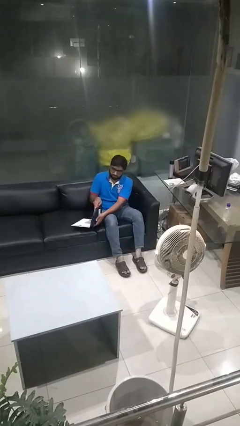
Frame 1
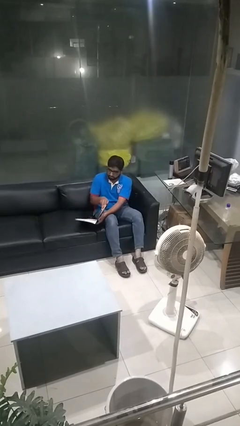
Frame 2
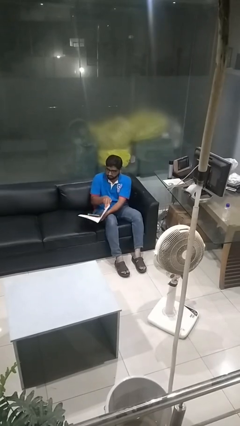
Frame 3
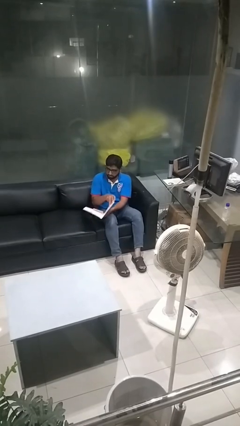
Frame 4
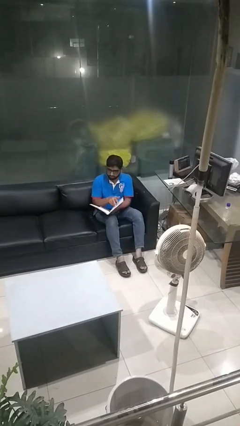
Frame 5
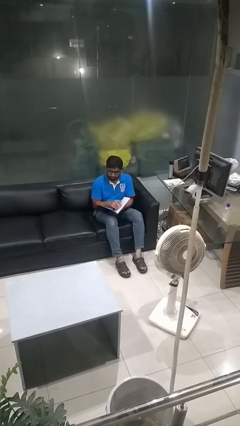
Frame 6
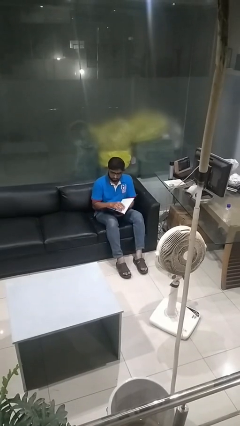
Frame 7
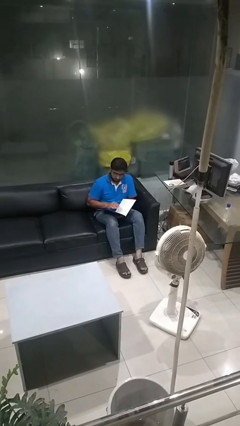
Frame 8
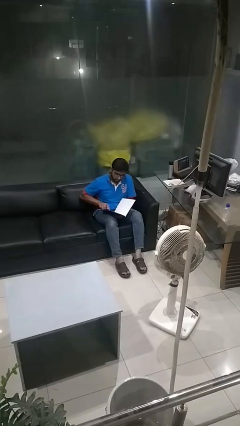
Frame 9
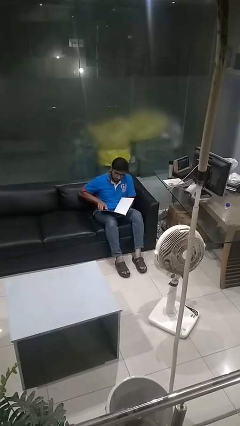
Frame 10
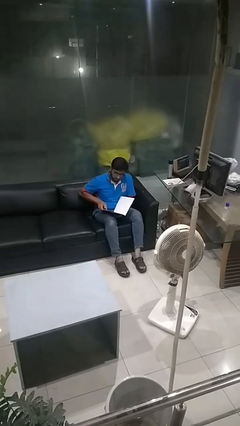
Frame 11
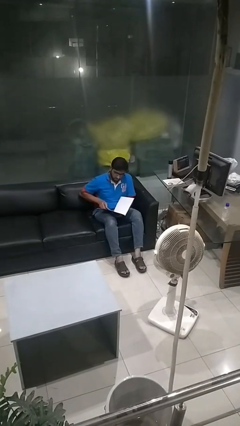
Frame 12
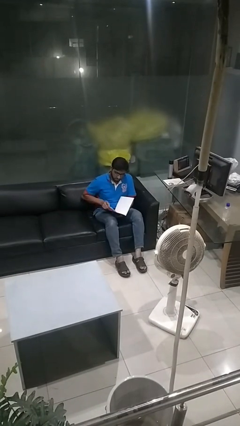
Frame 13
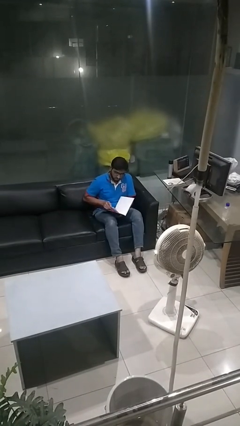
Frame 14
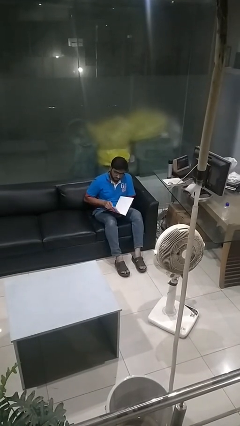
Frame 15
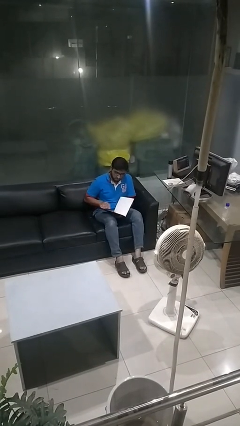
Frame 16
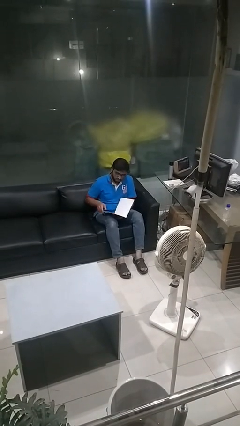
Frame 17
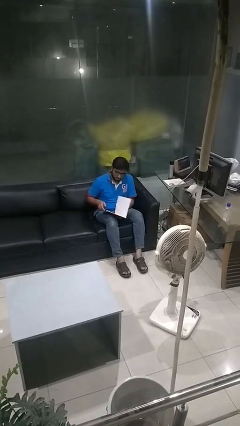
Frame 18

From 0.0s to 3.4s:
person reads magazine

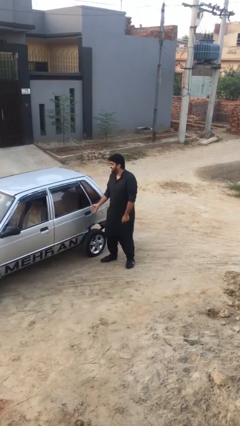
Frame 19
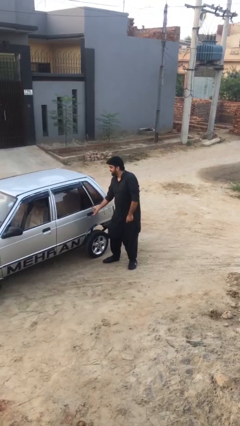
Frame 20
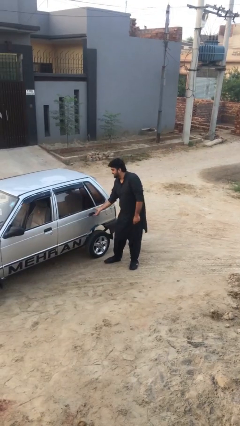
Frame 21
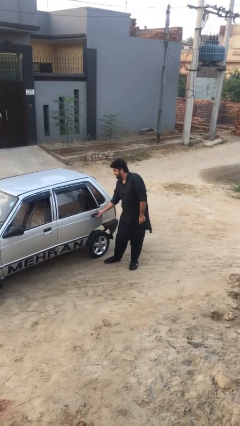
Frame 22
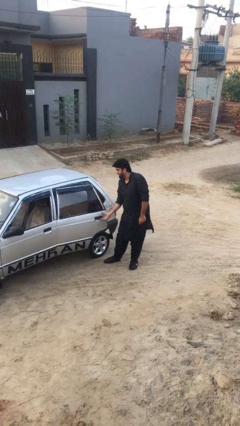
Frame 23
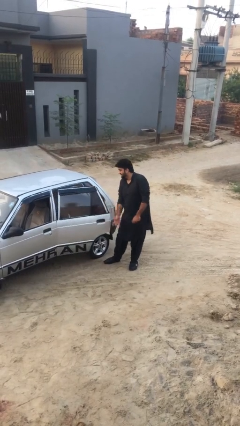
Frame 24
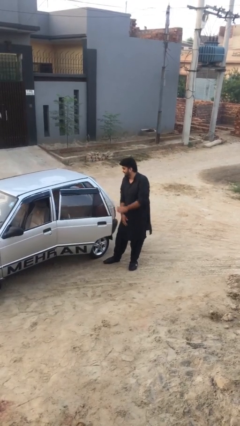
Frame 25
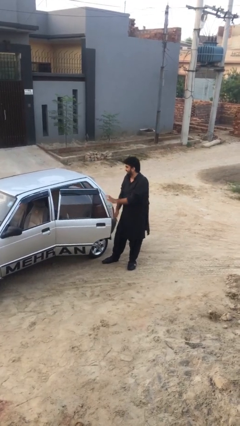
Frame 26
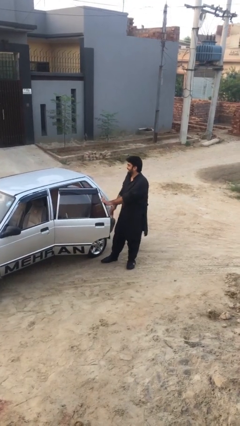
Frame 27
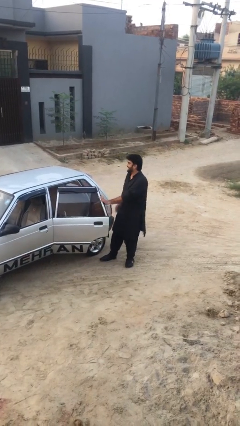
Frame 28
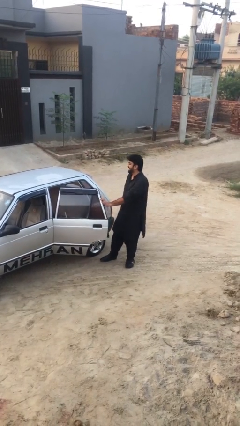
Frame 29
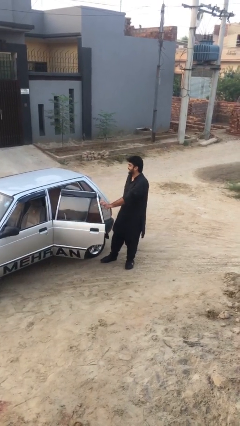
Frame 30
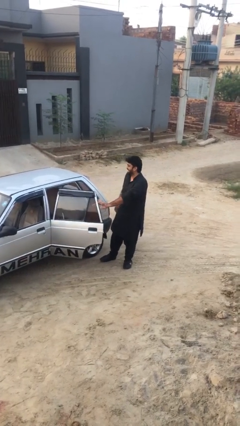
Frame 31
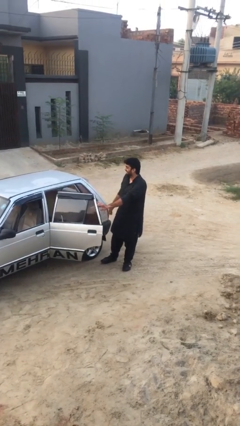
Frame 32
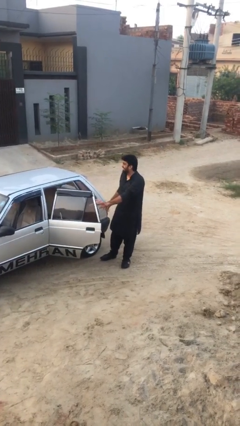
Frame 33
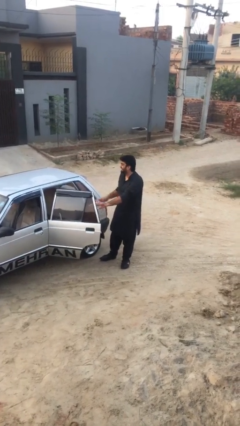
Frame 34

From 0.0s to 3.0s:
person opens car door

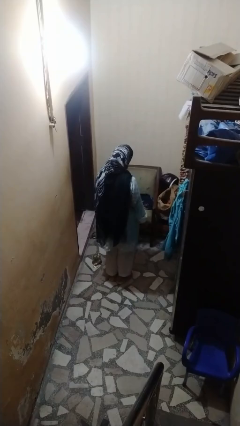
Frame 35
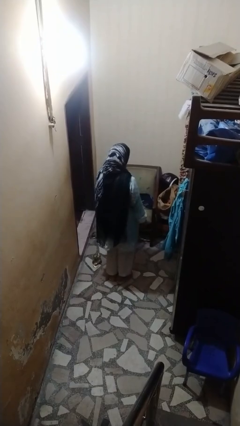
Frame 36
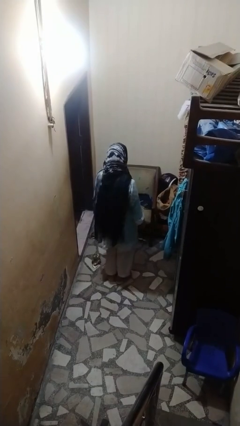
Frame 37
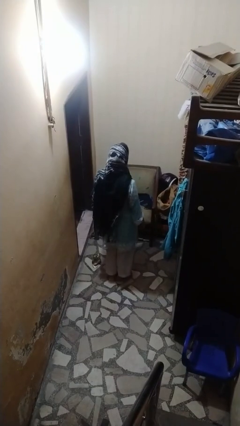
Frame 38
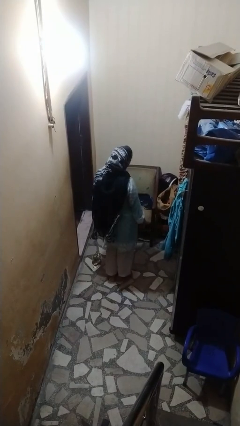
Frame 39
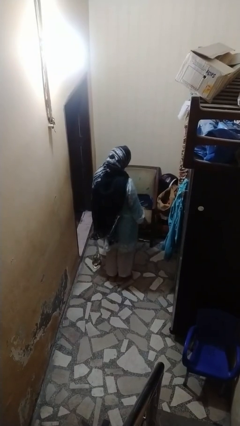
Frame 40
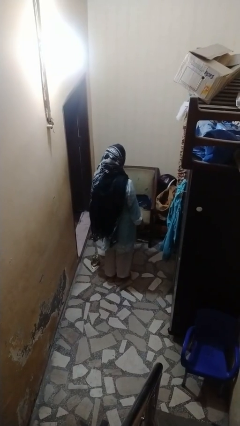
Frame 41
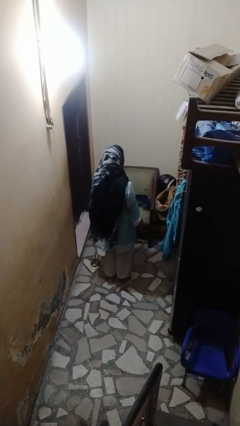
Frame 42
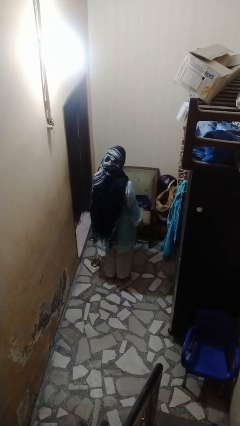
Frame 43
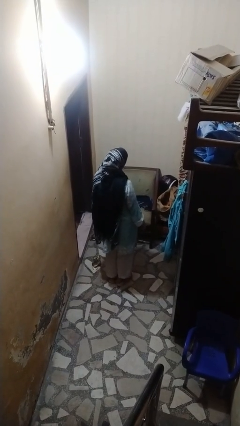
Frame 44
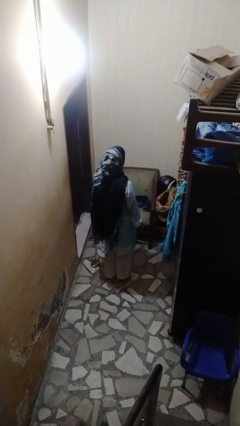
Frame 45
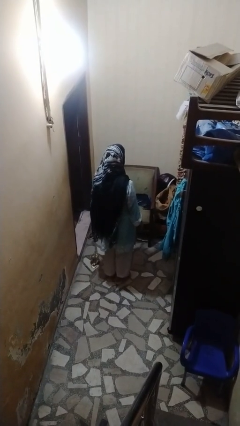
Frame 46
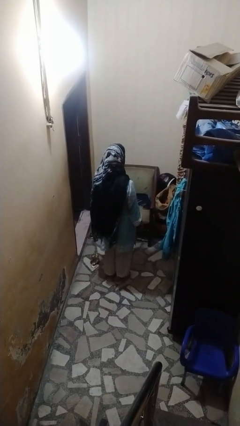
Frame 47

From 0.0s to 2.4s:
person sticks out tongue

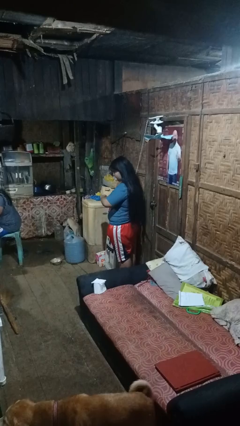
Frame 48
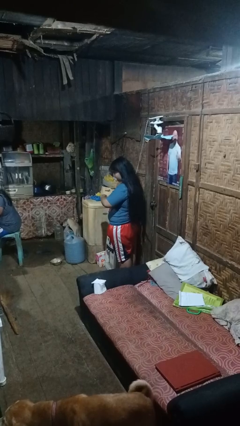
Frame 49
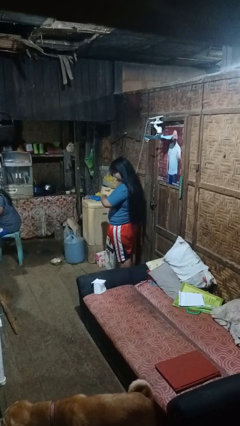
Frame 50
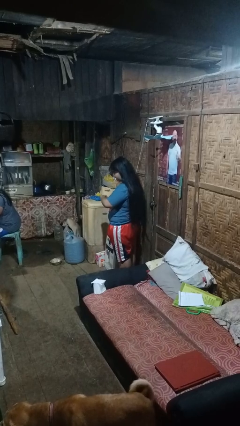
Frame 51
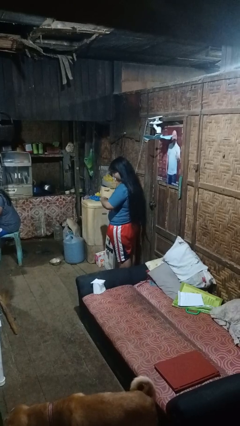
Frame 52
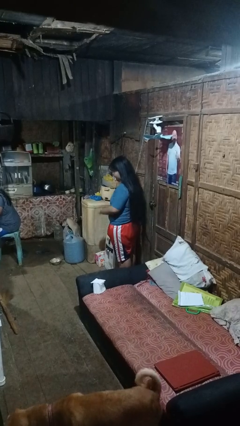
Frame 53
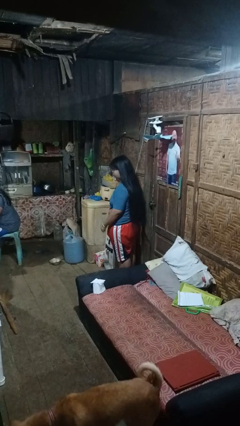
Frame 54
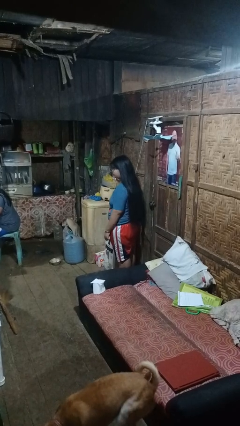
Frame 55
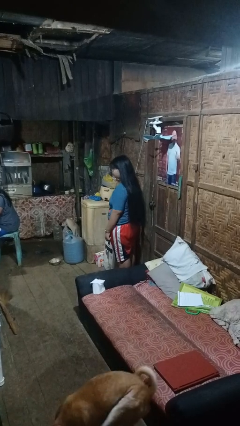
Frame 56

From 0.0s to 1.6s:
person looks at wristwatch

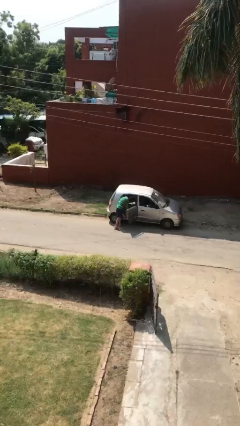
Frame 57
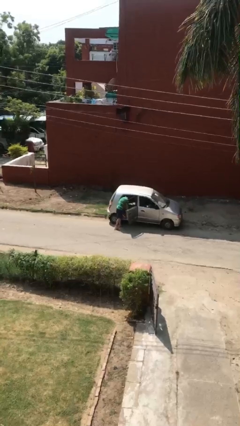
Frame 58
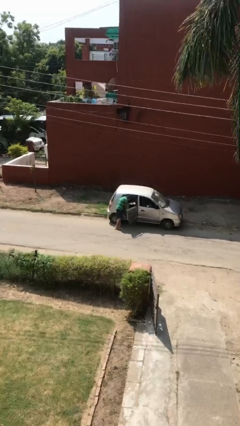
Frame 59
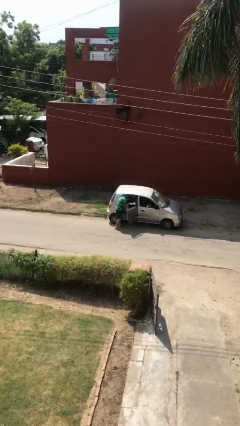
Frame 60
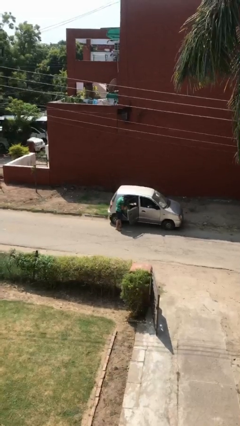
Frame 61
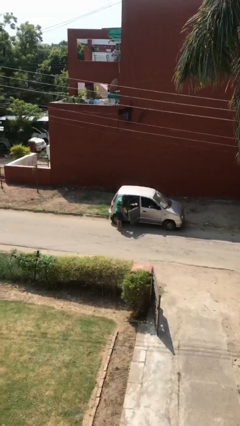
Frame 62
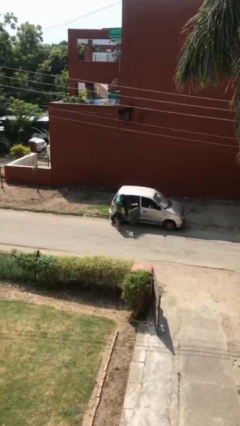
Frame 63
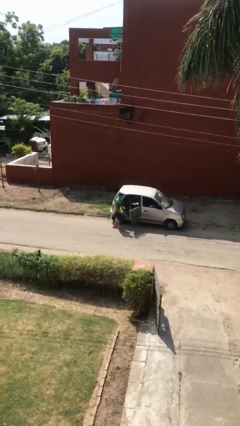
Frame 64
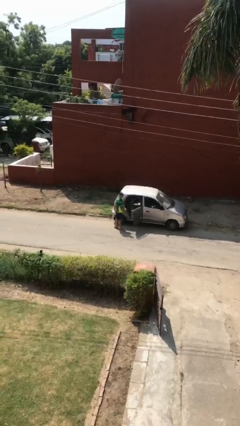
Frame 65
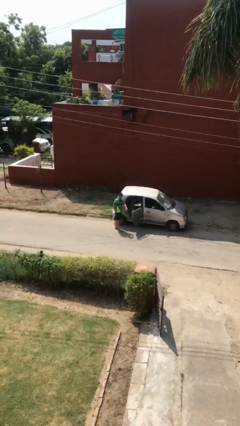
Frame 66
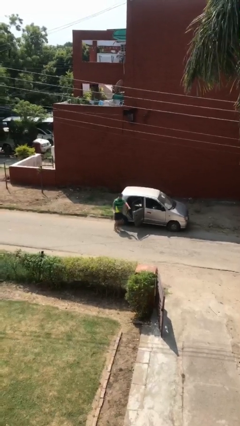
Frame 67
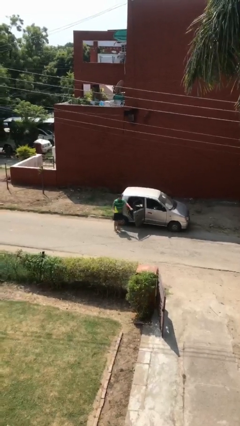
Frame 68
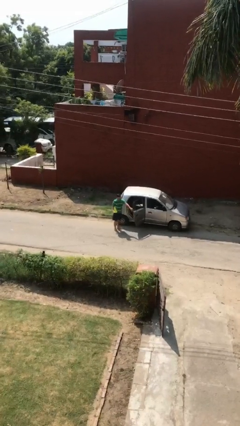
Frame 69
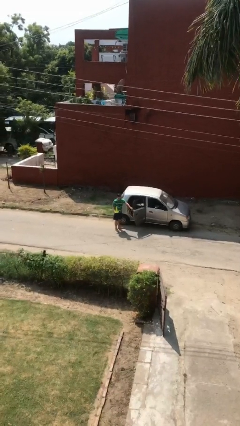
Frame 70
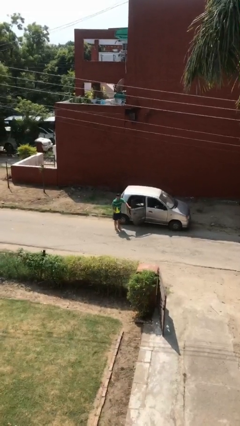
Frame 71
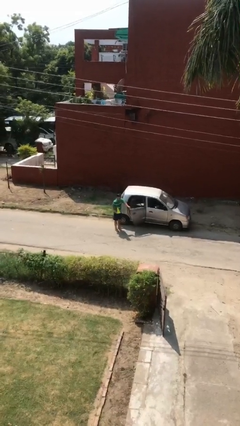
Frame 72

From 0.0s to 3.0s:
person unloads car

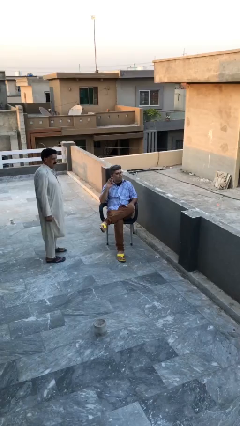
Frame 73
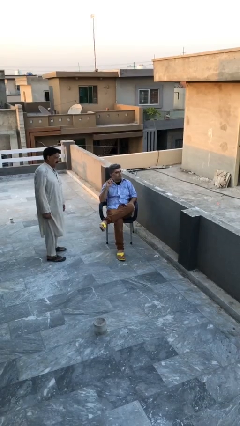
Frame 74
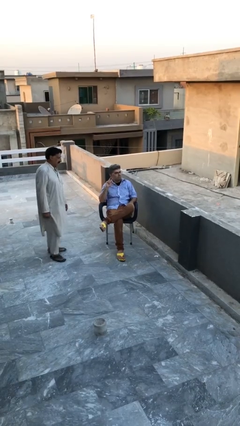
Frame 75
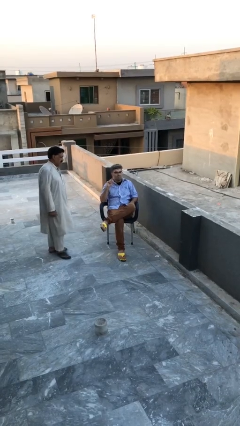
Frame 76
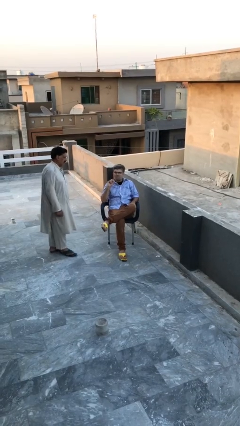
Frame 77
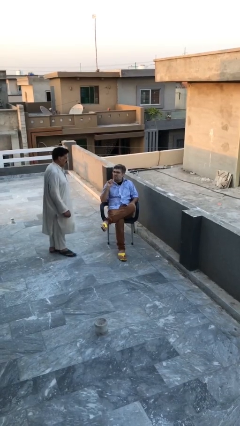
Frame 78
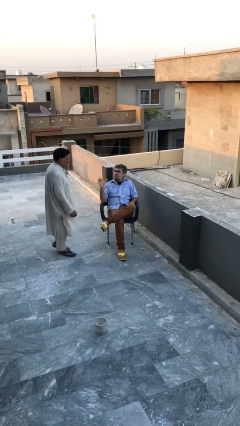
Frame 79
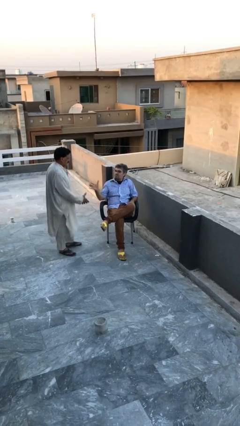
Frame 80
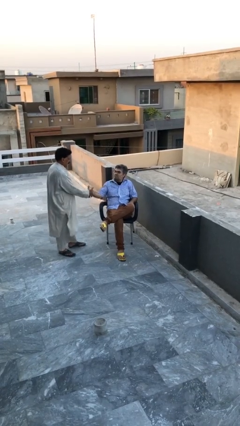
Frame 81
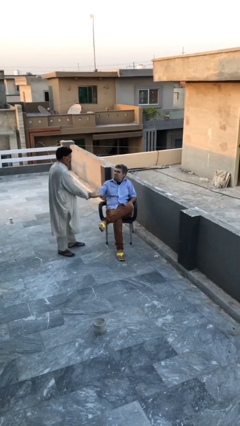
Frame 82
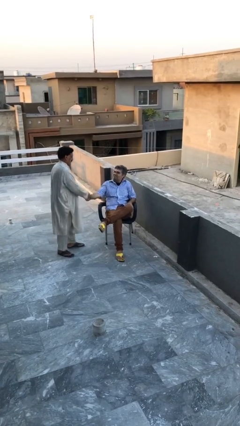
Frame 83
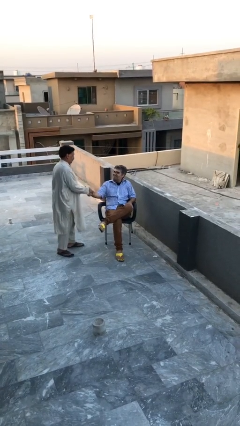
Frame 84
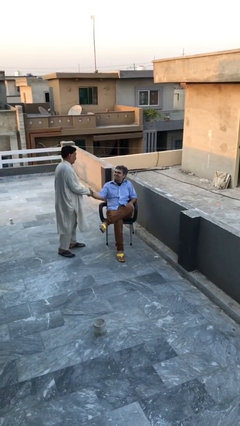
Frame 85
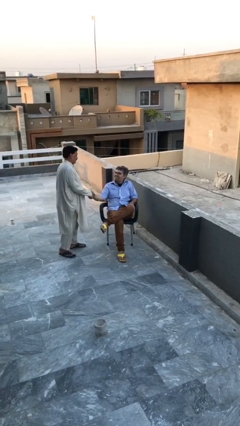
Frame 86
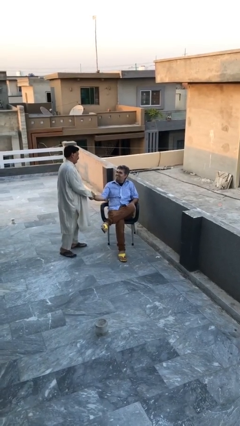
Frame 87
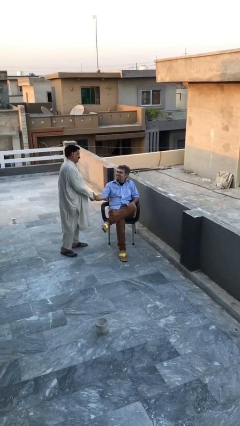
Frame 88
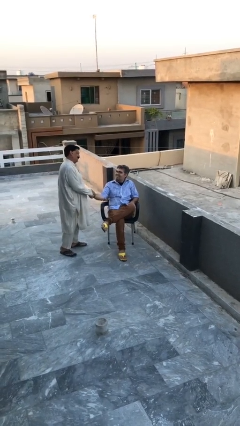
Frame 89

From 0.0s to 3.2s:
person shakes hand

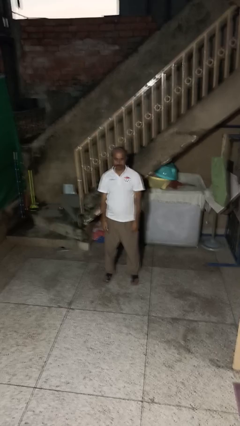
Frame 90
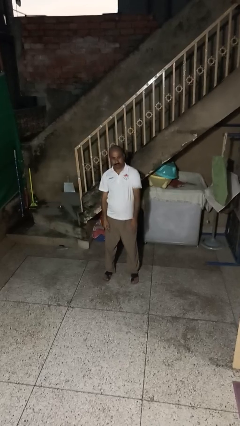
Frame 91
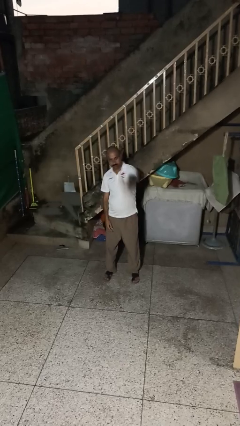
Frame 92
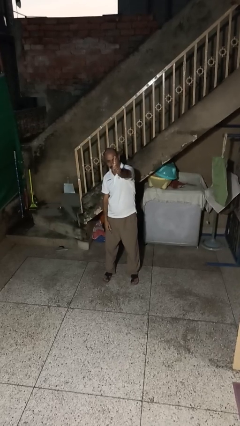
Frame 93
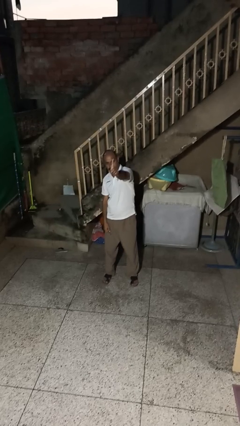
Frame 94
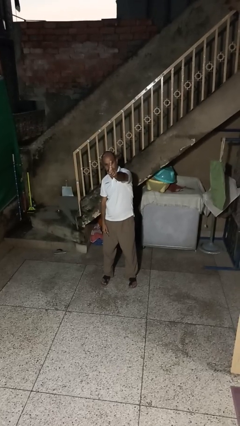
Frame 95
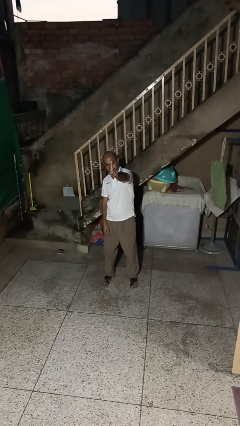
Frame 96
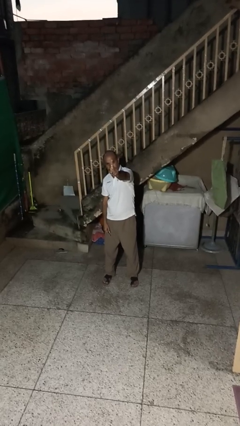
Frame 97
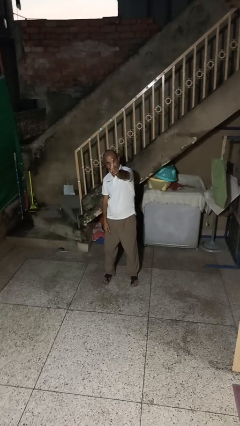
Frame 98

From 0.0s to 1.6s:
person gestures number one
